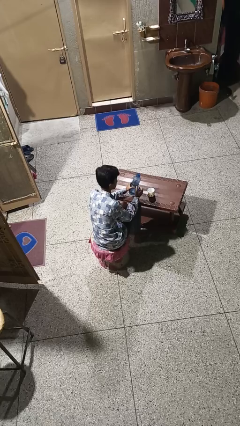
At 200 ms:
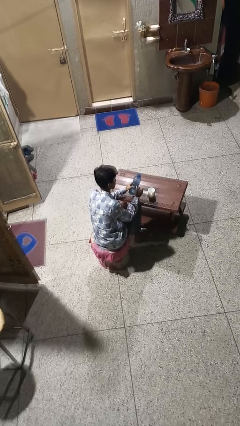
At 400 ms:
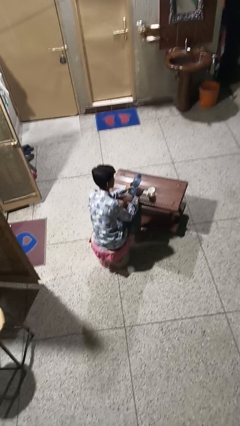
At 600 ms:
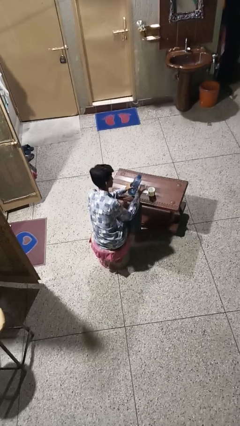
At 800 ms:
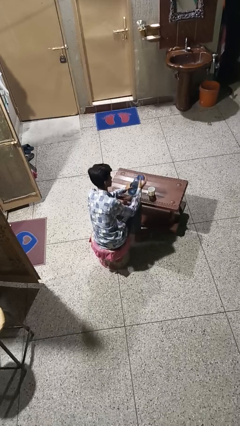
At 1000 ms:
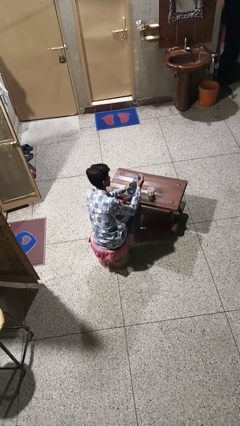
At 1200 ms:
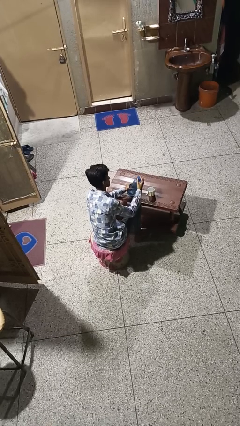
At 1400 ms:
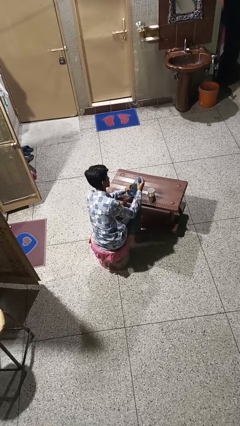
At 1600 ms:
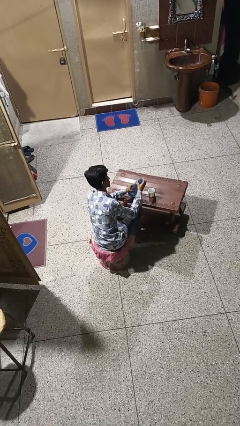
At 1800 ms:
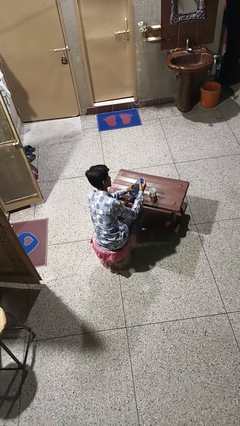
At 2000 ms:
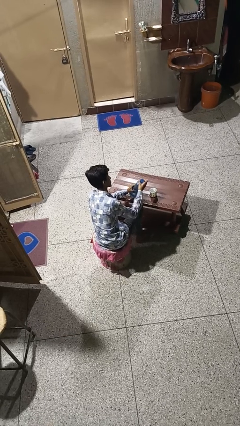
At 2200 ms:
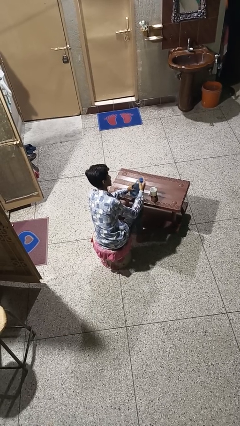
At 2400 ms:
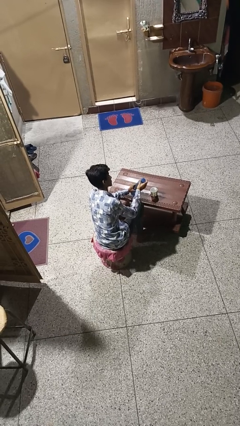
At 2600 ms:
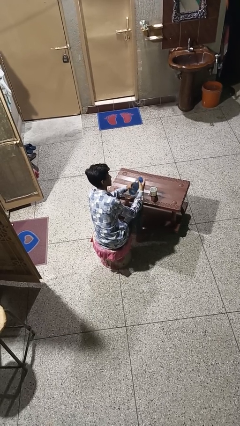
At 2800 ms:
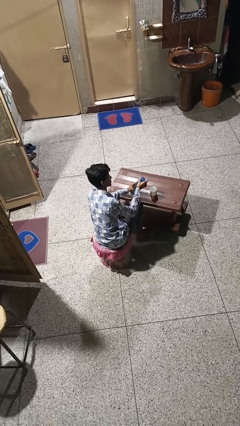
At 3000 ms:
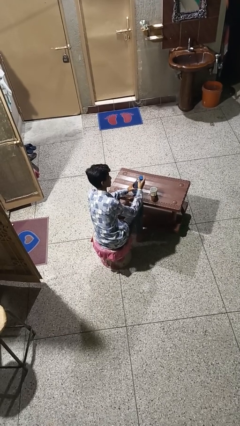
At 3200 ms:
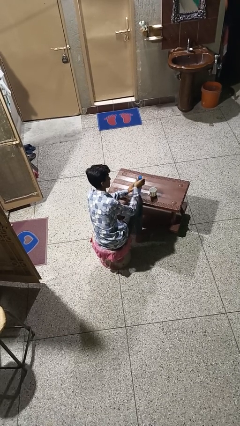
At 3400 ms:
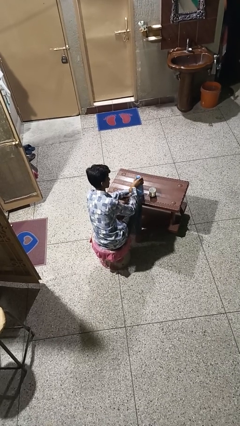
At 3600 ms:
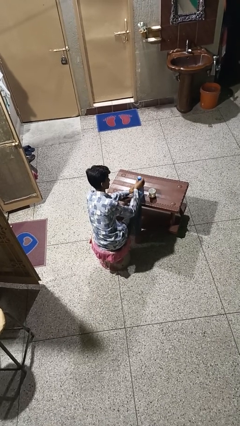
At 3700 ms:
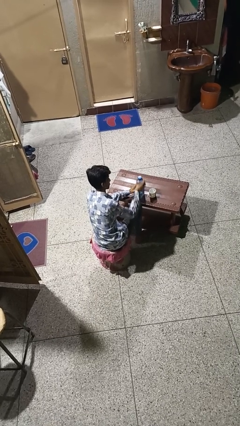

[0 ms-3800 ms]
person screws lid to bottle

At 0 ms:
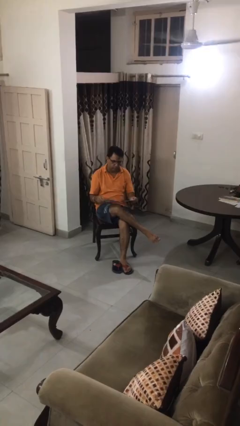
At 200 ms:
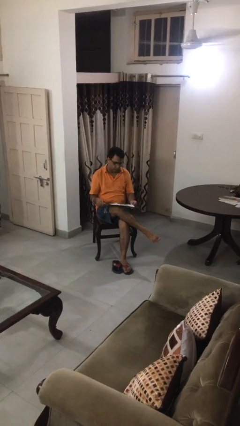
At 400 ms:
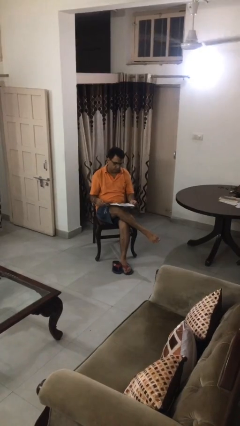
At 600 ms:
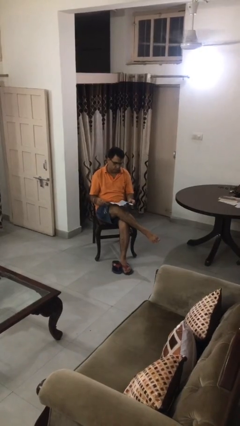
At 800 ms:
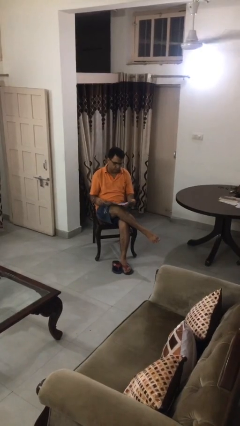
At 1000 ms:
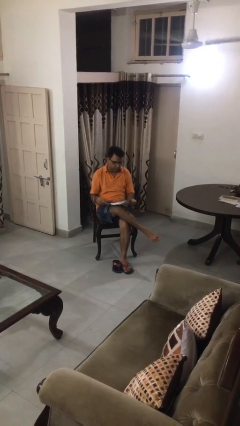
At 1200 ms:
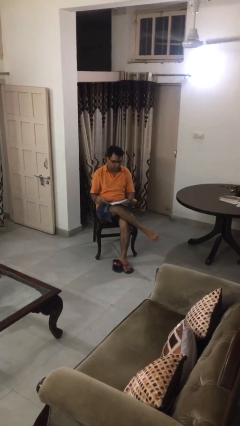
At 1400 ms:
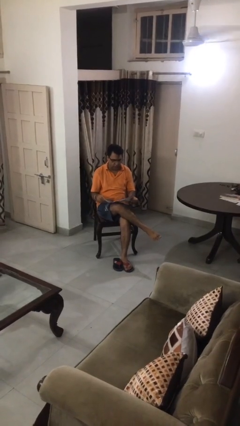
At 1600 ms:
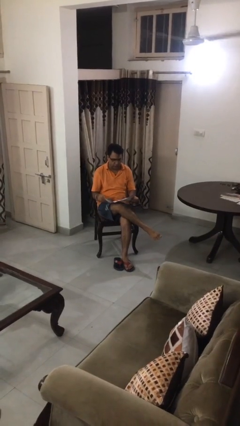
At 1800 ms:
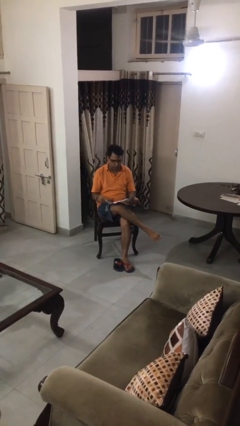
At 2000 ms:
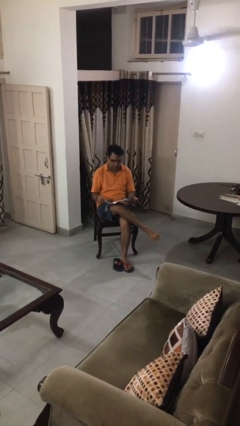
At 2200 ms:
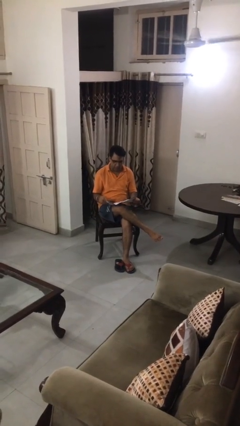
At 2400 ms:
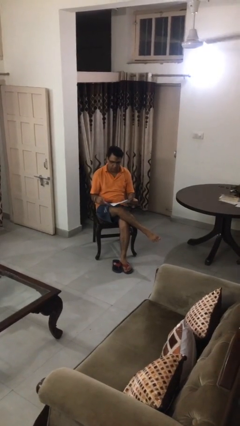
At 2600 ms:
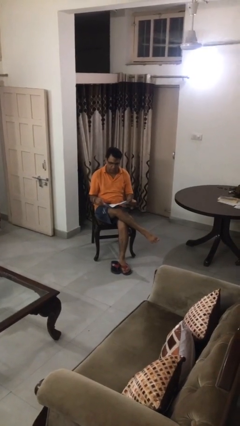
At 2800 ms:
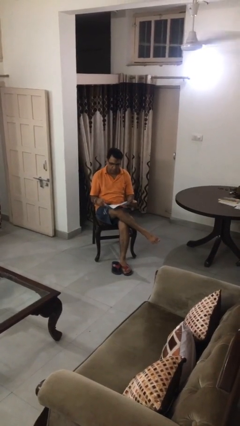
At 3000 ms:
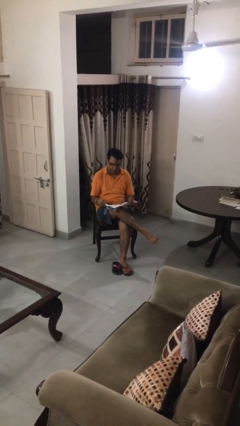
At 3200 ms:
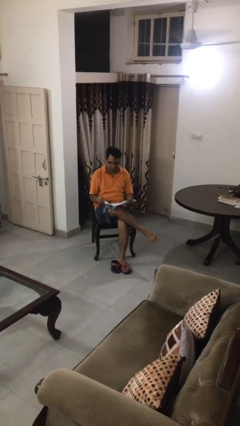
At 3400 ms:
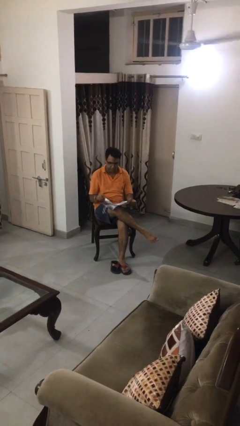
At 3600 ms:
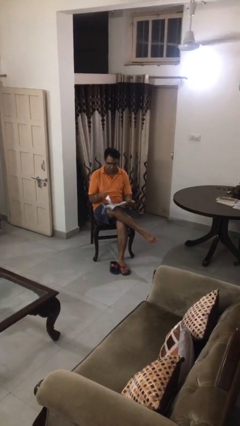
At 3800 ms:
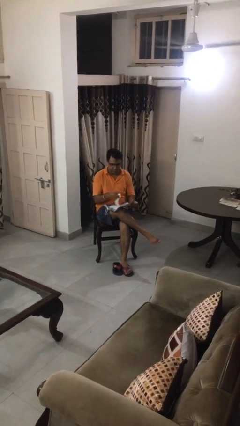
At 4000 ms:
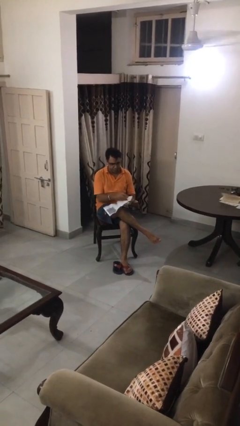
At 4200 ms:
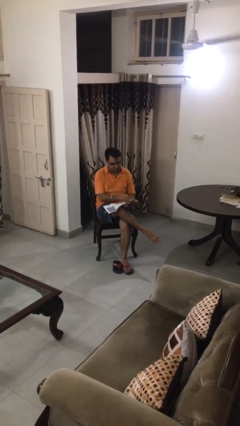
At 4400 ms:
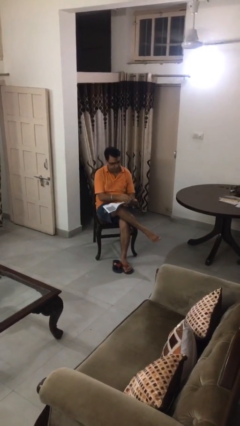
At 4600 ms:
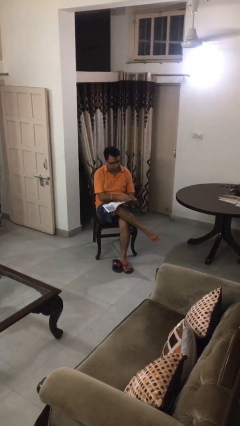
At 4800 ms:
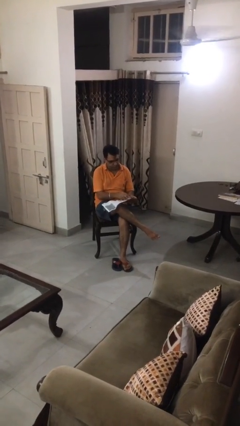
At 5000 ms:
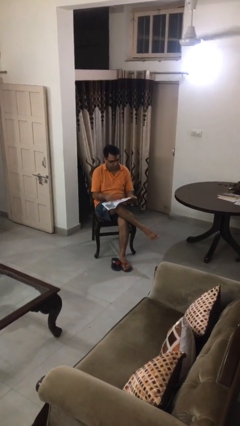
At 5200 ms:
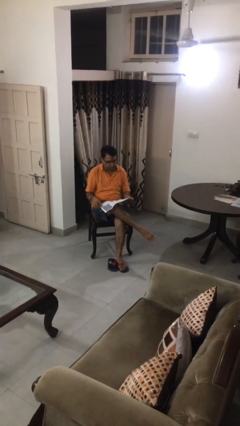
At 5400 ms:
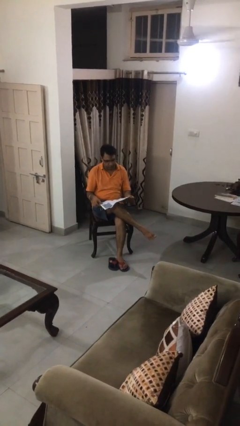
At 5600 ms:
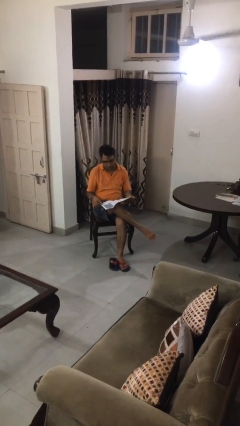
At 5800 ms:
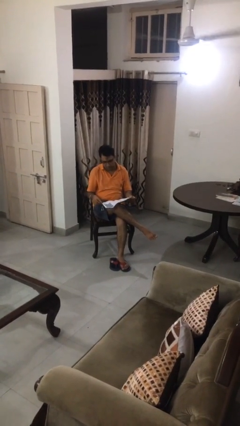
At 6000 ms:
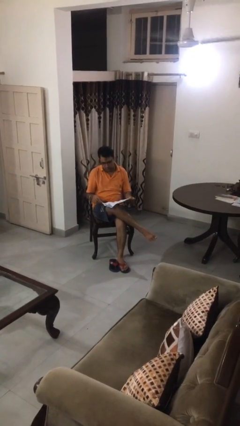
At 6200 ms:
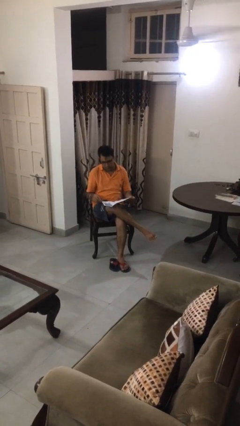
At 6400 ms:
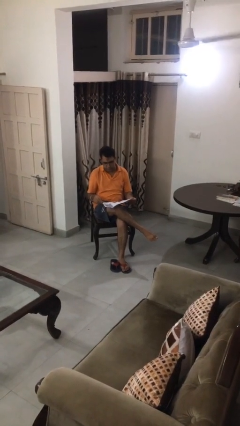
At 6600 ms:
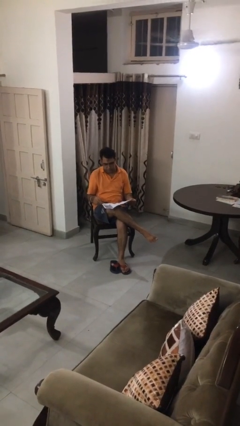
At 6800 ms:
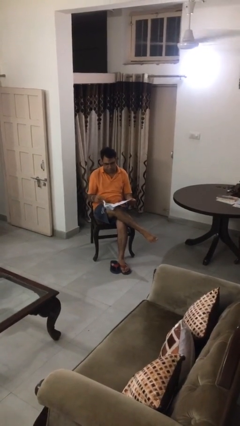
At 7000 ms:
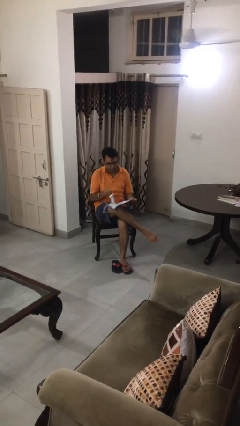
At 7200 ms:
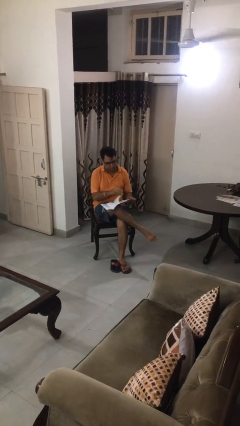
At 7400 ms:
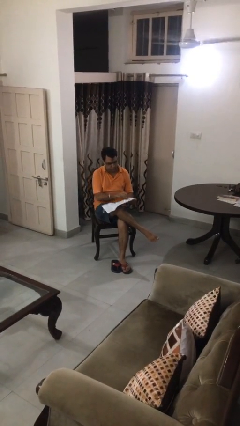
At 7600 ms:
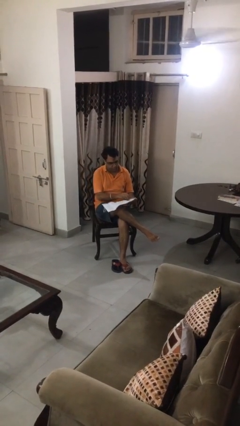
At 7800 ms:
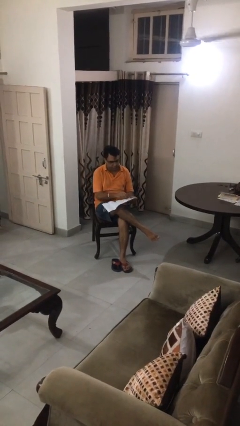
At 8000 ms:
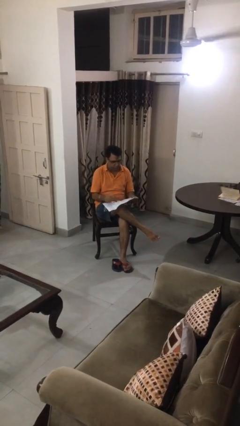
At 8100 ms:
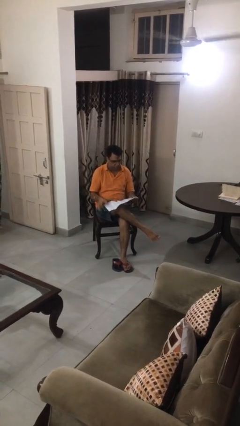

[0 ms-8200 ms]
person reads magazine

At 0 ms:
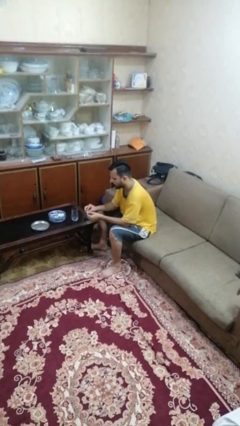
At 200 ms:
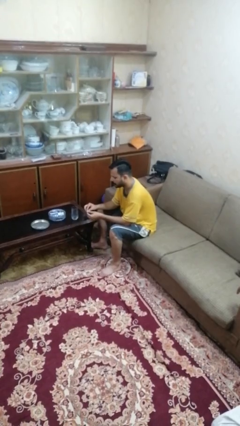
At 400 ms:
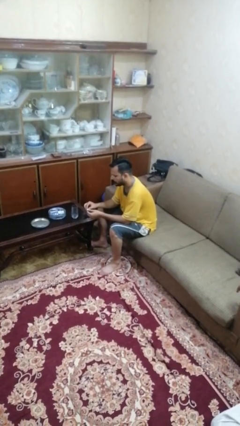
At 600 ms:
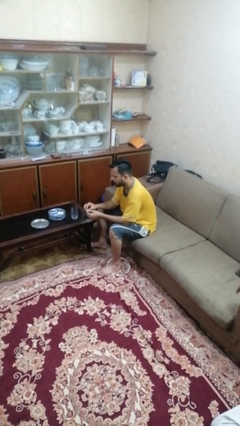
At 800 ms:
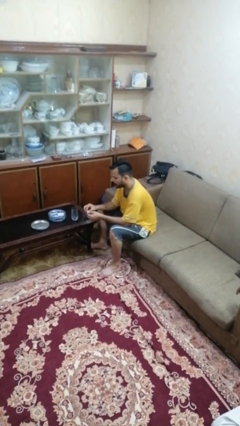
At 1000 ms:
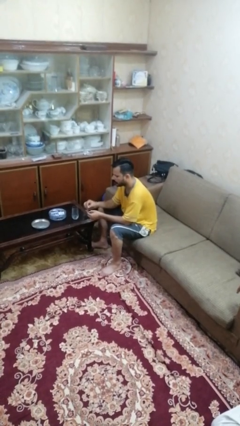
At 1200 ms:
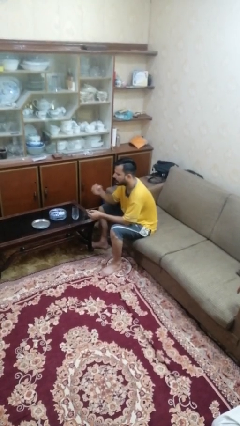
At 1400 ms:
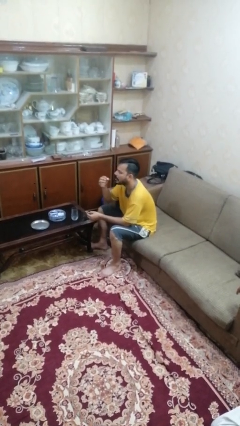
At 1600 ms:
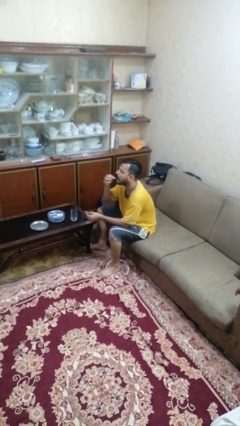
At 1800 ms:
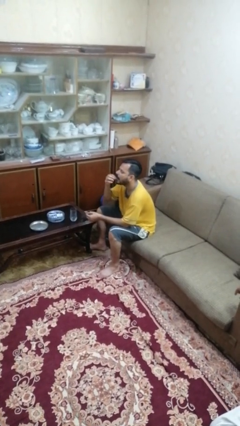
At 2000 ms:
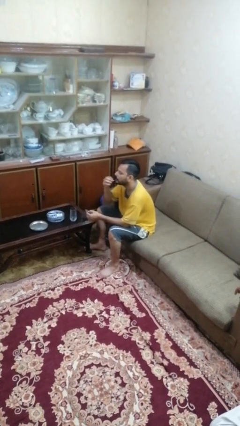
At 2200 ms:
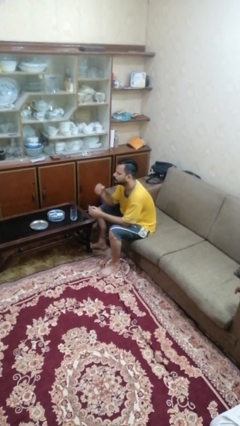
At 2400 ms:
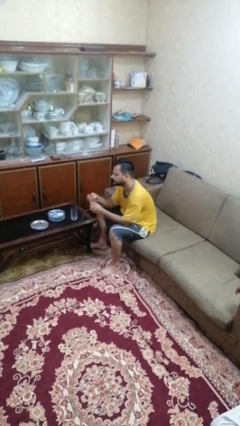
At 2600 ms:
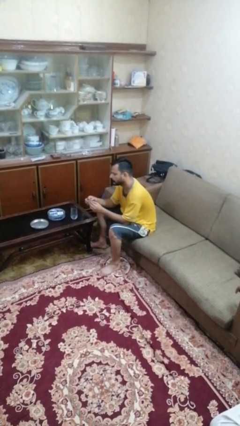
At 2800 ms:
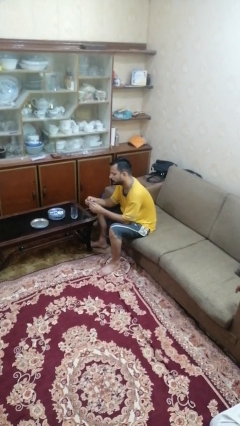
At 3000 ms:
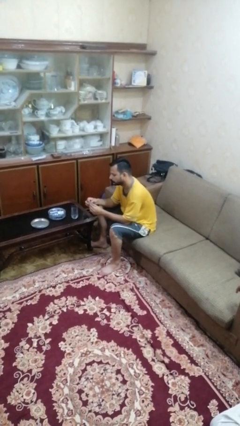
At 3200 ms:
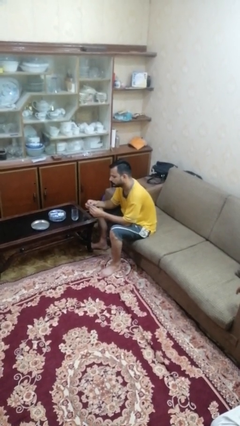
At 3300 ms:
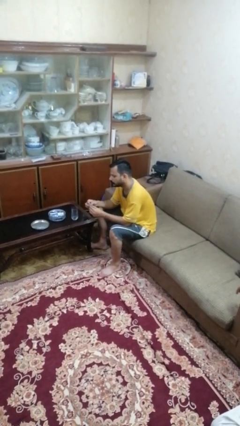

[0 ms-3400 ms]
person takes medicine pills

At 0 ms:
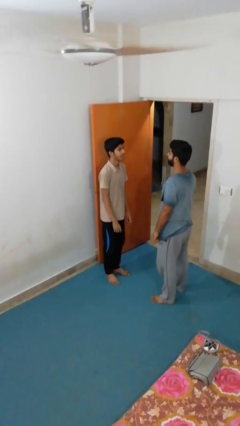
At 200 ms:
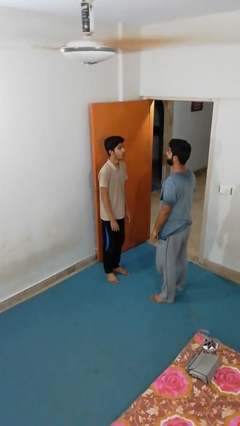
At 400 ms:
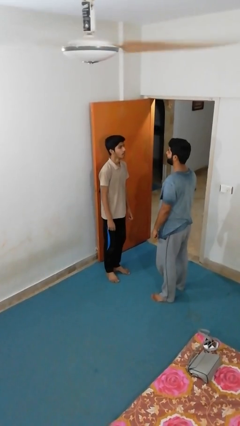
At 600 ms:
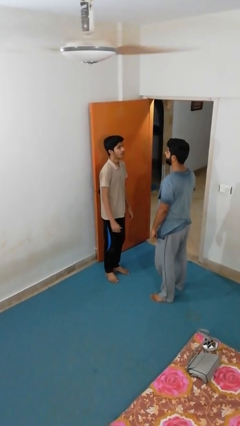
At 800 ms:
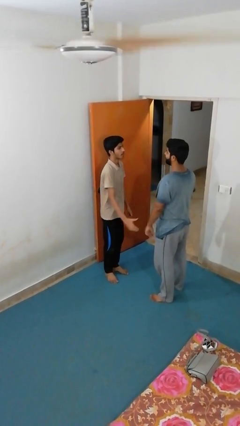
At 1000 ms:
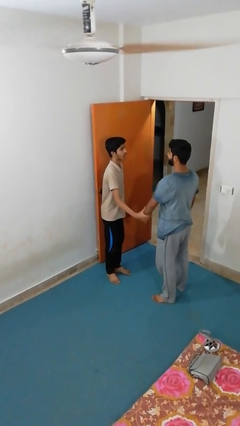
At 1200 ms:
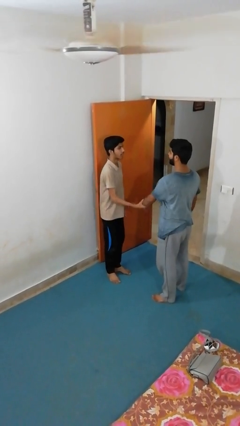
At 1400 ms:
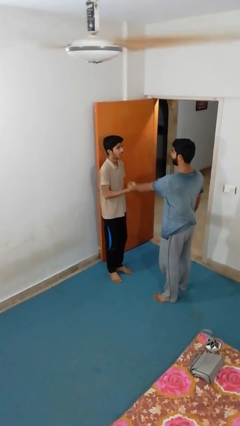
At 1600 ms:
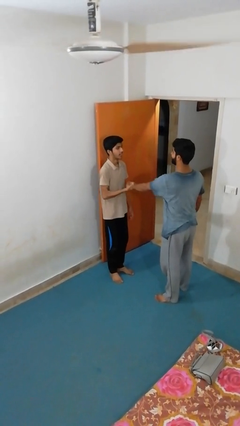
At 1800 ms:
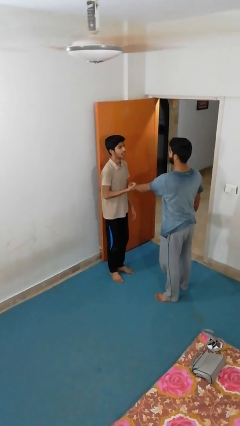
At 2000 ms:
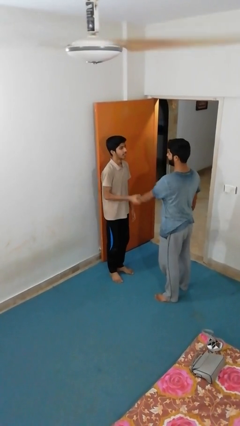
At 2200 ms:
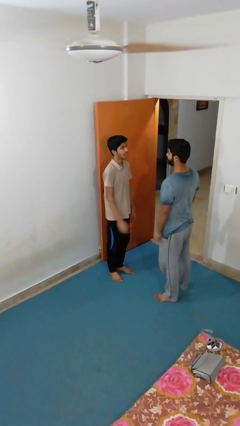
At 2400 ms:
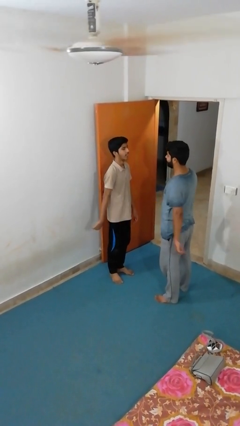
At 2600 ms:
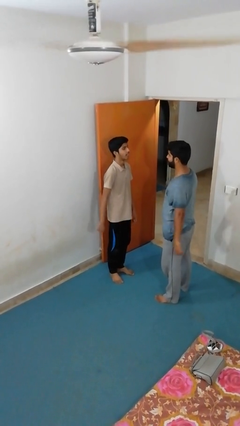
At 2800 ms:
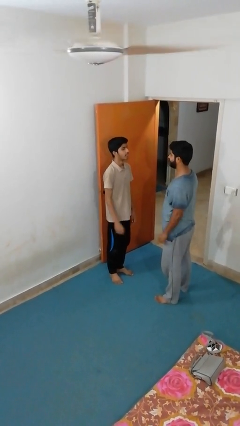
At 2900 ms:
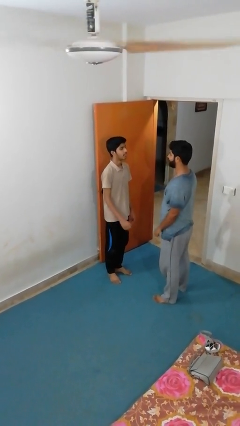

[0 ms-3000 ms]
person grabs person by forearm
